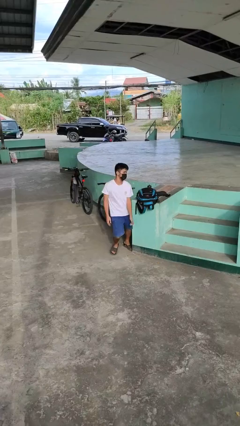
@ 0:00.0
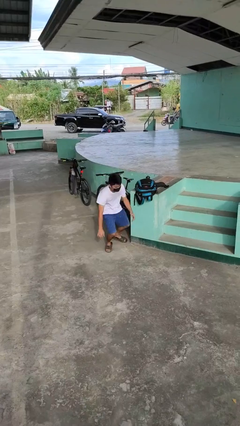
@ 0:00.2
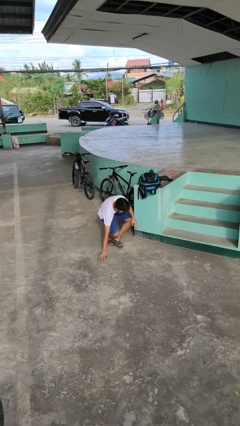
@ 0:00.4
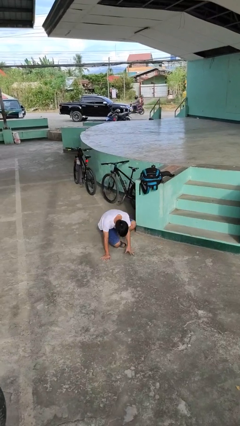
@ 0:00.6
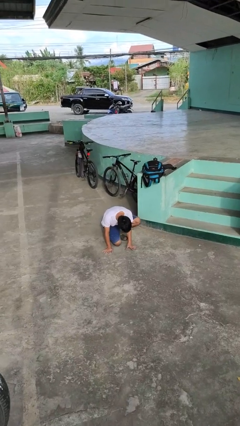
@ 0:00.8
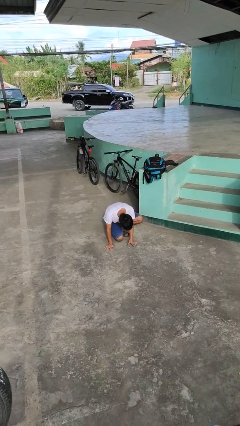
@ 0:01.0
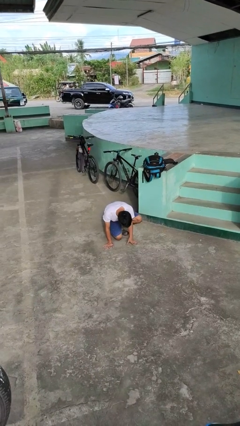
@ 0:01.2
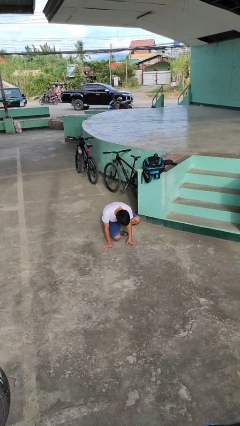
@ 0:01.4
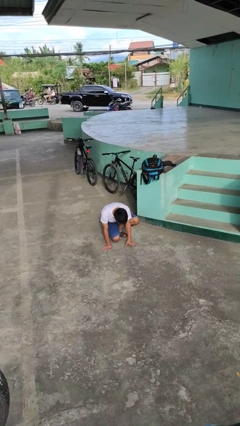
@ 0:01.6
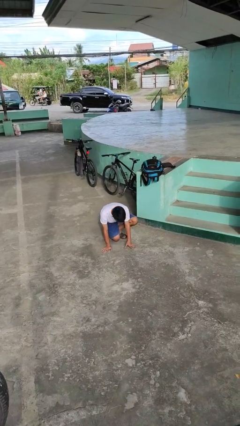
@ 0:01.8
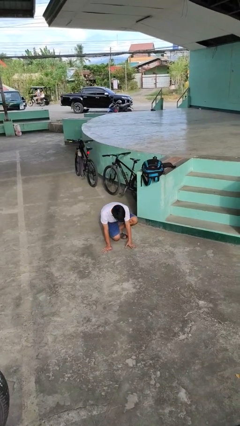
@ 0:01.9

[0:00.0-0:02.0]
person trips on object on floor

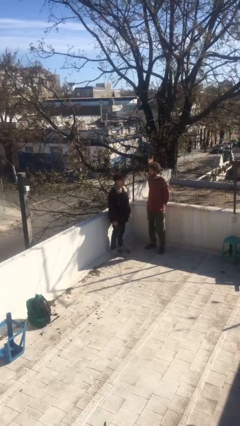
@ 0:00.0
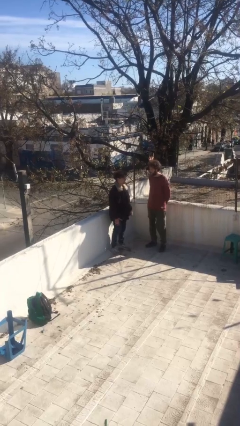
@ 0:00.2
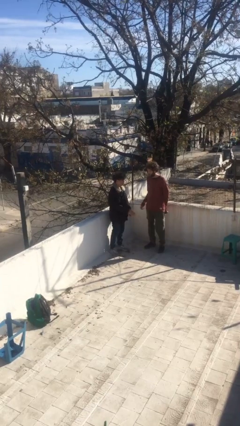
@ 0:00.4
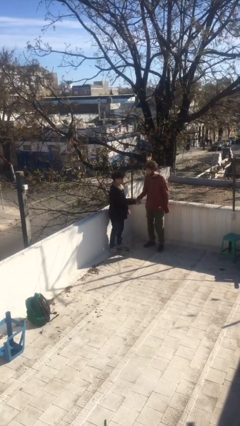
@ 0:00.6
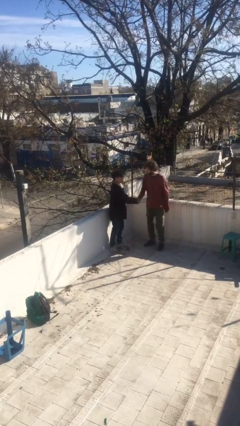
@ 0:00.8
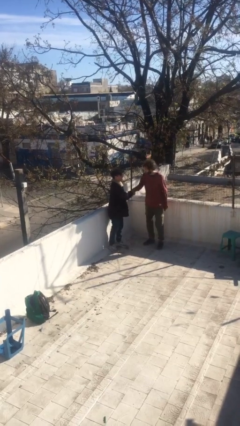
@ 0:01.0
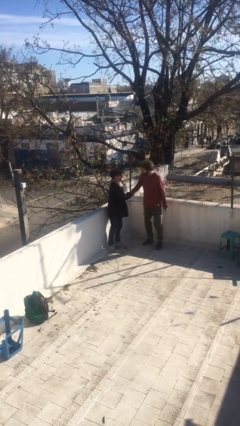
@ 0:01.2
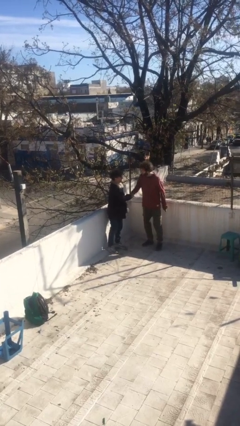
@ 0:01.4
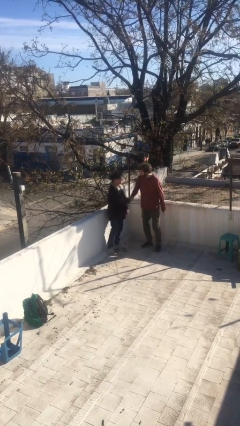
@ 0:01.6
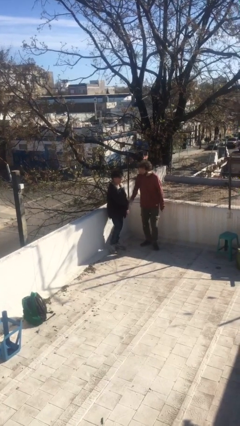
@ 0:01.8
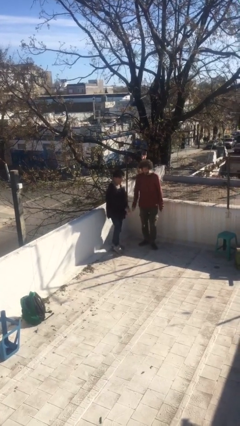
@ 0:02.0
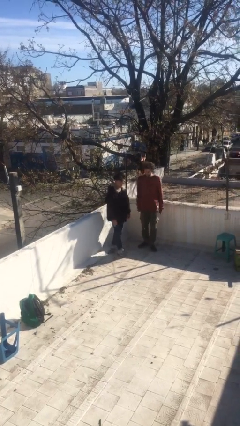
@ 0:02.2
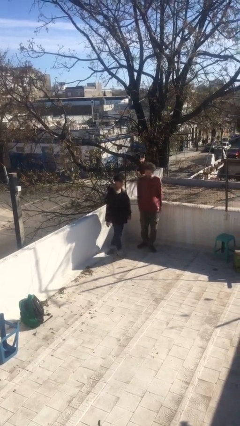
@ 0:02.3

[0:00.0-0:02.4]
person shakes hand

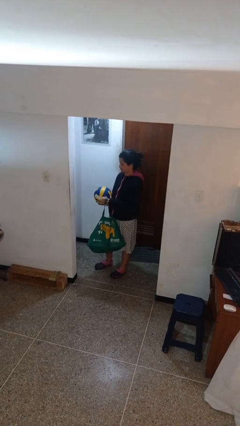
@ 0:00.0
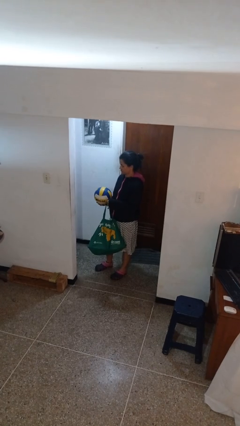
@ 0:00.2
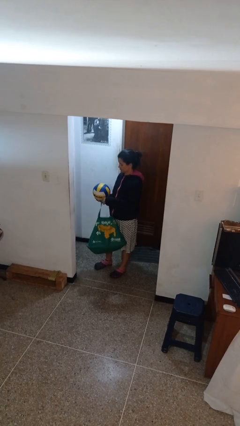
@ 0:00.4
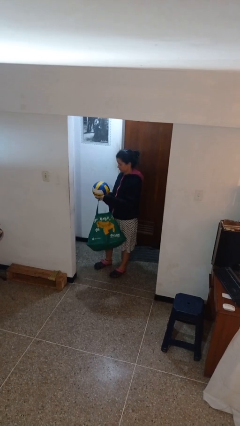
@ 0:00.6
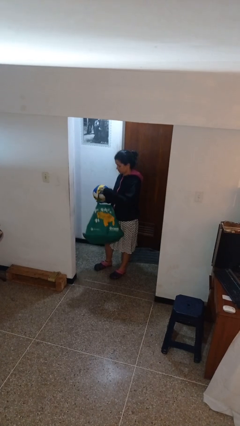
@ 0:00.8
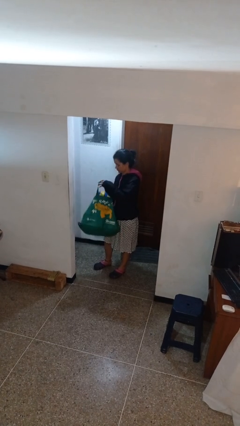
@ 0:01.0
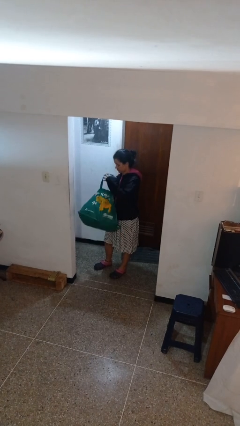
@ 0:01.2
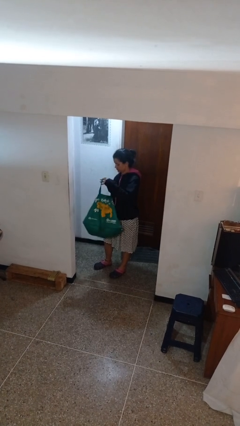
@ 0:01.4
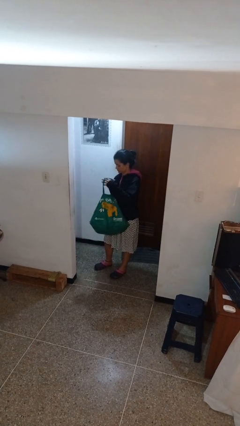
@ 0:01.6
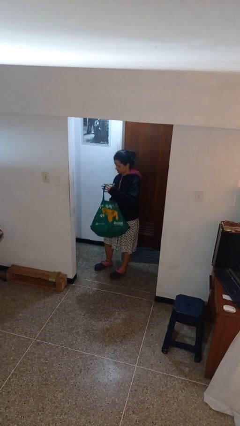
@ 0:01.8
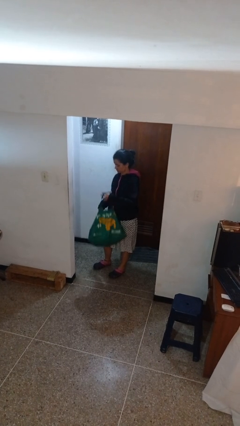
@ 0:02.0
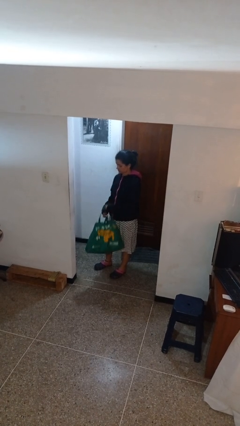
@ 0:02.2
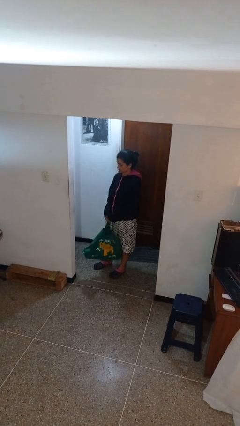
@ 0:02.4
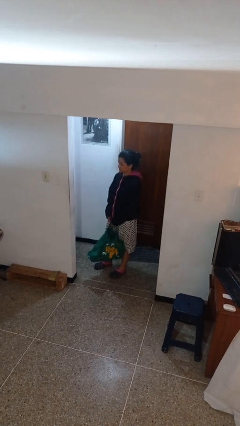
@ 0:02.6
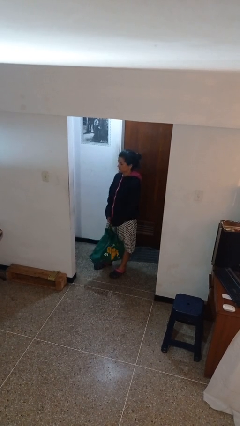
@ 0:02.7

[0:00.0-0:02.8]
person puts object into bag

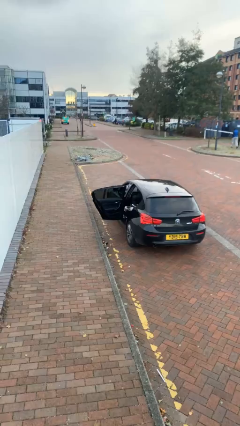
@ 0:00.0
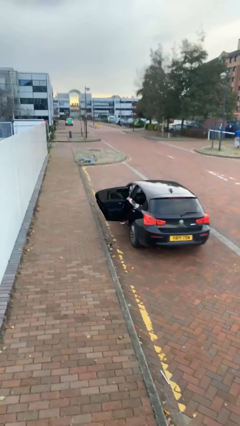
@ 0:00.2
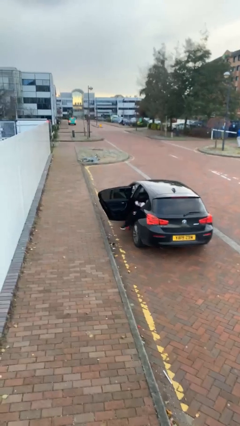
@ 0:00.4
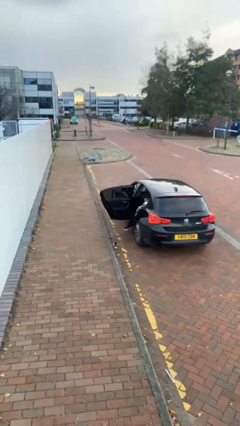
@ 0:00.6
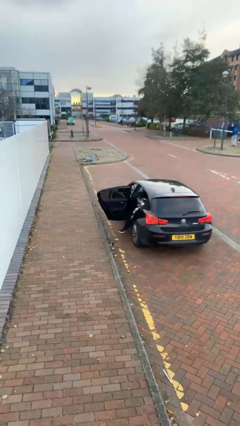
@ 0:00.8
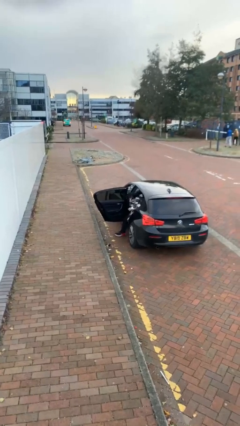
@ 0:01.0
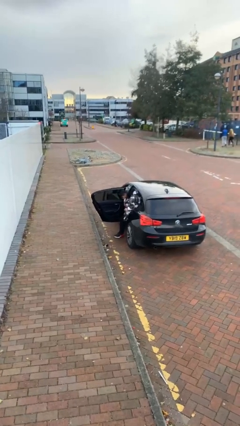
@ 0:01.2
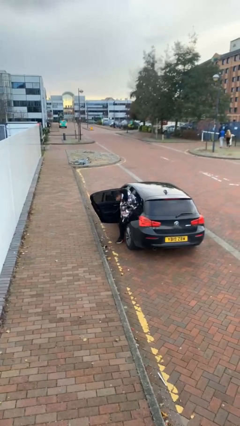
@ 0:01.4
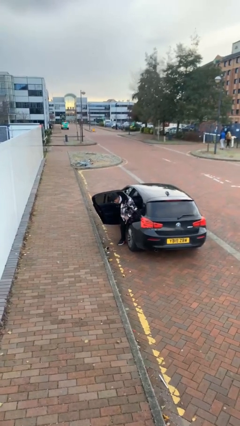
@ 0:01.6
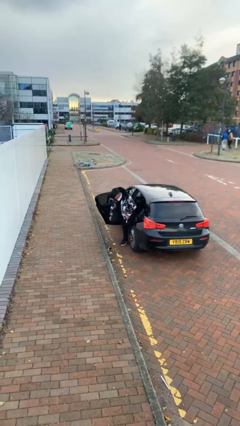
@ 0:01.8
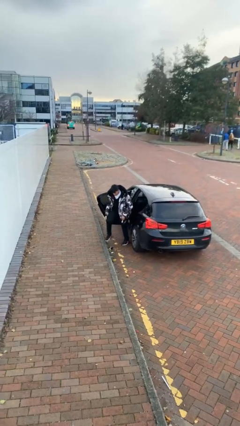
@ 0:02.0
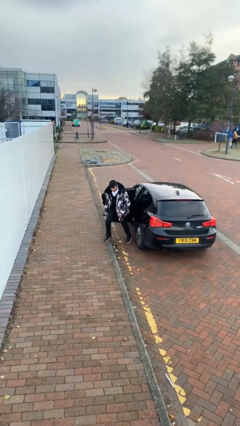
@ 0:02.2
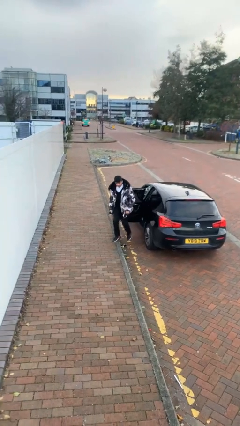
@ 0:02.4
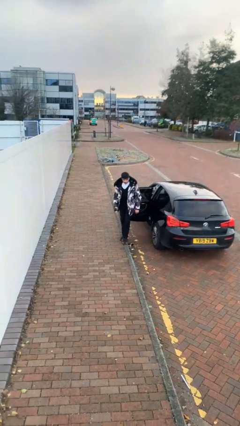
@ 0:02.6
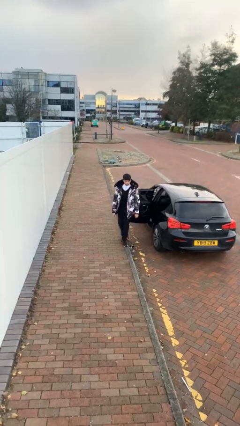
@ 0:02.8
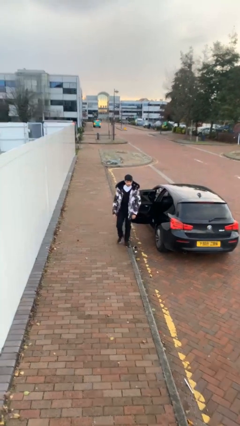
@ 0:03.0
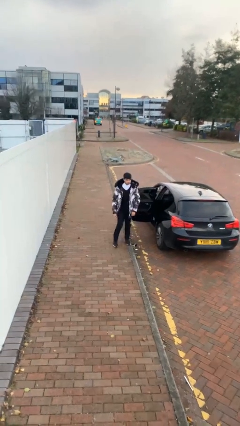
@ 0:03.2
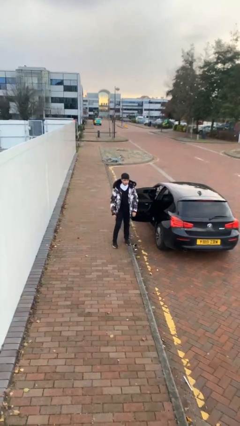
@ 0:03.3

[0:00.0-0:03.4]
person exits car

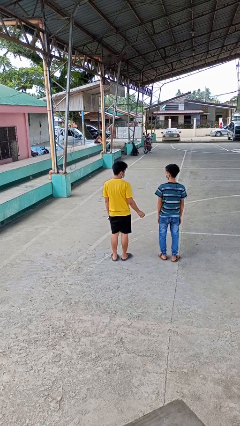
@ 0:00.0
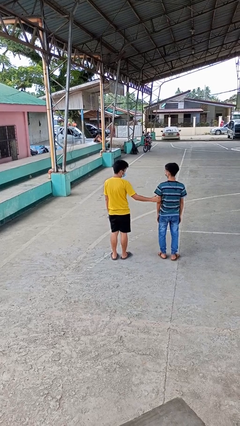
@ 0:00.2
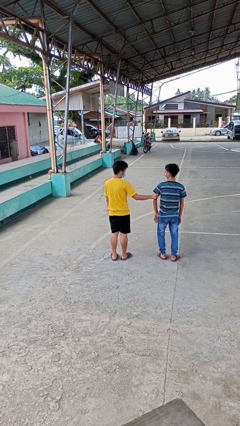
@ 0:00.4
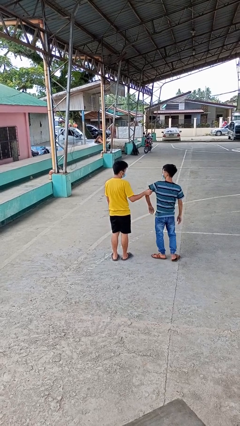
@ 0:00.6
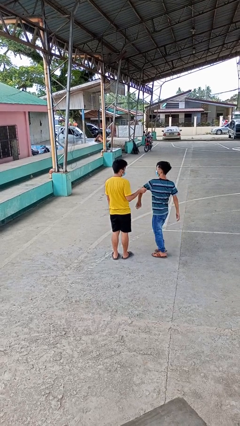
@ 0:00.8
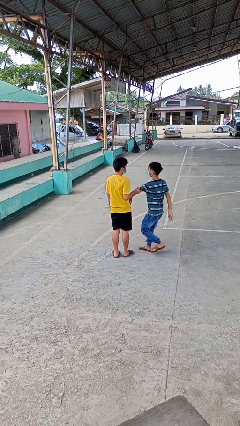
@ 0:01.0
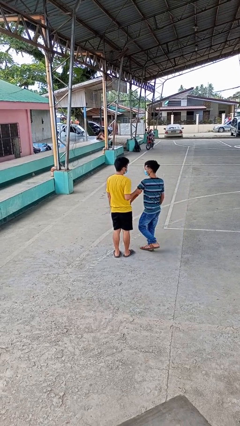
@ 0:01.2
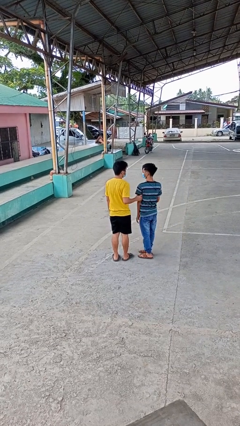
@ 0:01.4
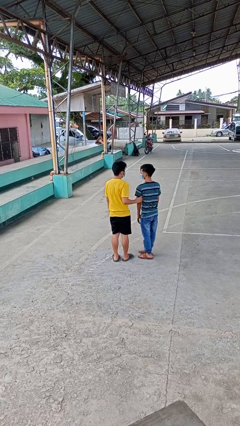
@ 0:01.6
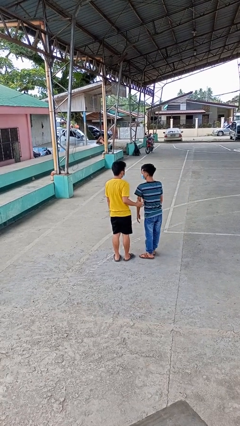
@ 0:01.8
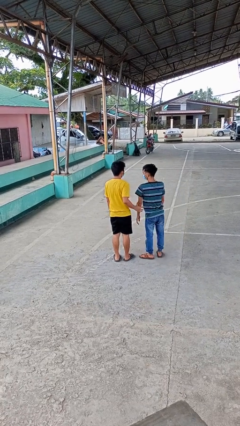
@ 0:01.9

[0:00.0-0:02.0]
person grabs person by bicep

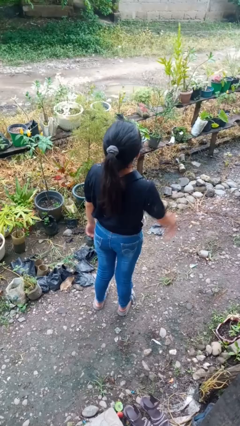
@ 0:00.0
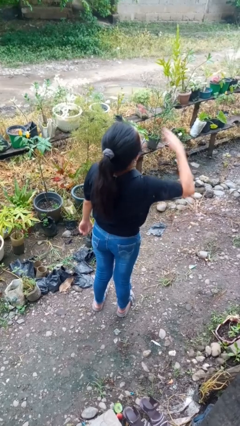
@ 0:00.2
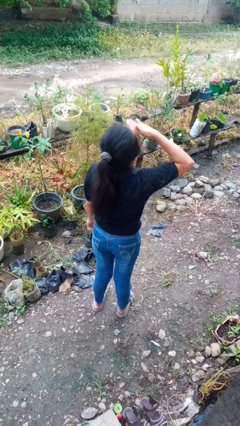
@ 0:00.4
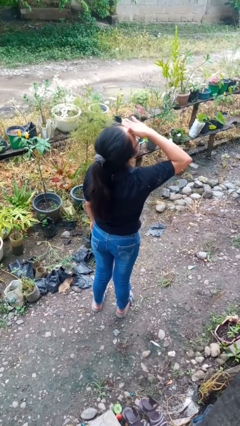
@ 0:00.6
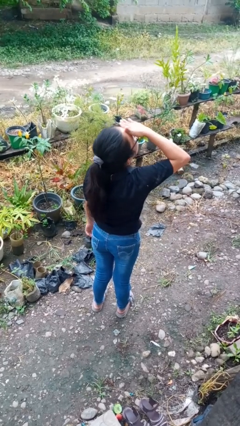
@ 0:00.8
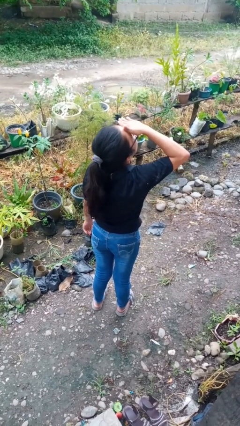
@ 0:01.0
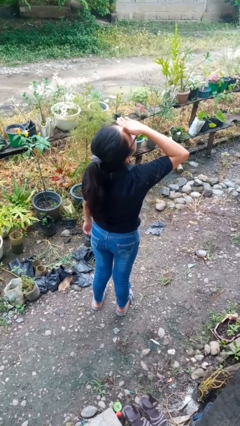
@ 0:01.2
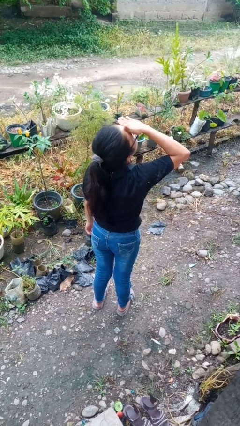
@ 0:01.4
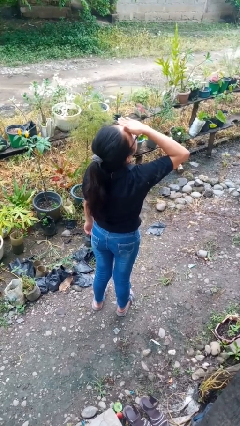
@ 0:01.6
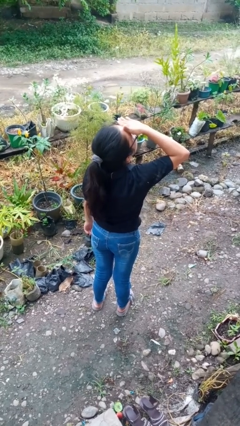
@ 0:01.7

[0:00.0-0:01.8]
person shades eyes

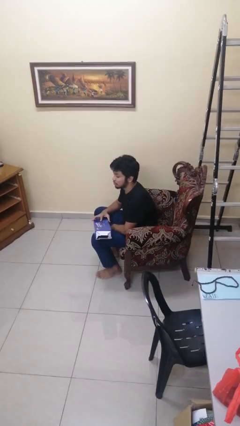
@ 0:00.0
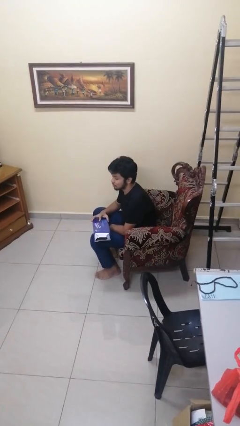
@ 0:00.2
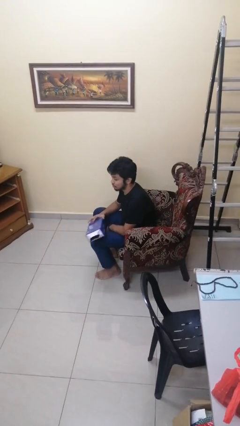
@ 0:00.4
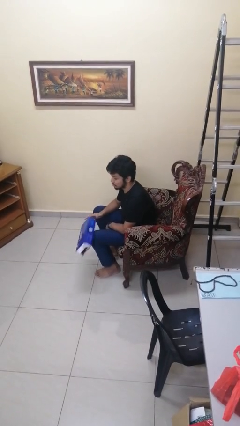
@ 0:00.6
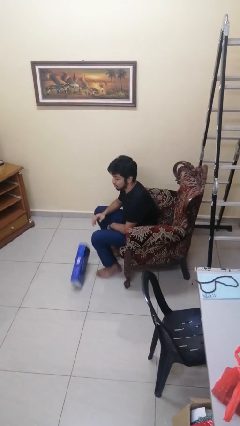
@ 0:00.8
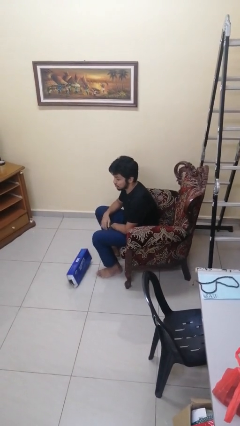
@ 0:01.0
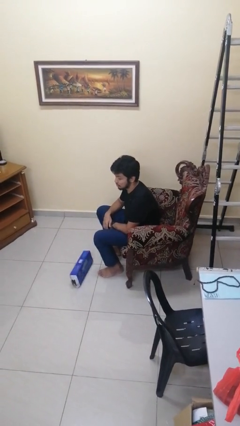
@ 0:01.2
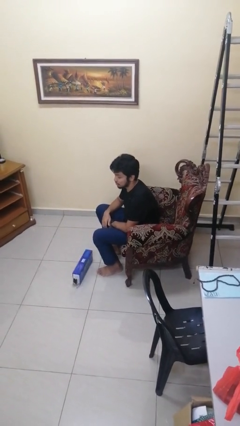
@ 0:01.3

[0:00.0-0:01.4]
person drops object

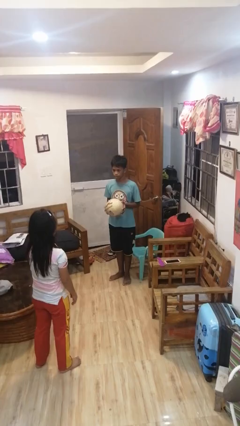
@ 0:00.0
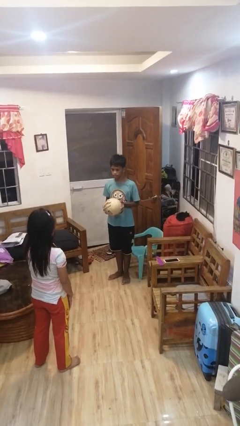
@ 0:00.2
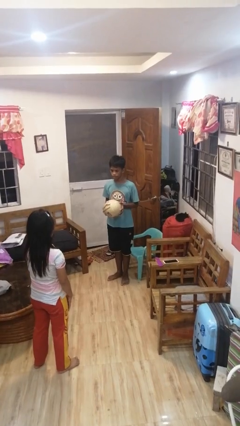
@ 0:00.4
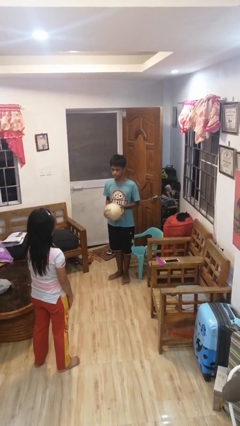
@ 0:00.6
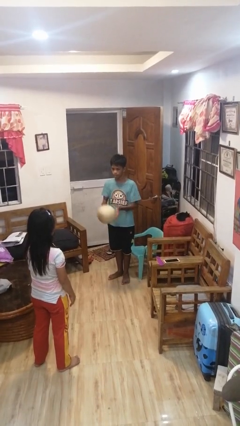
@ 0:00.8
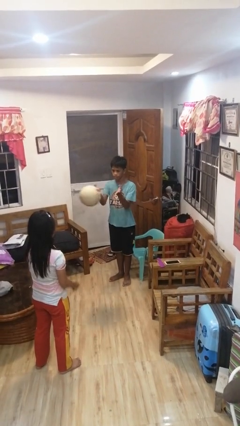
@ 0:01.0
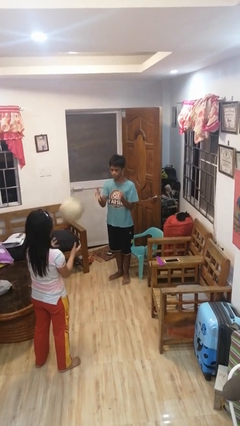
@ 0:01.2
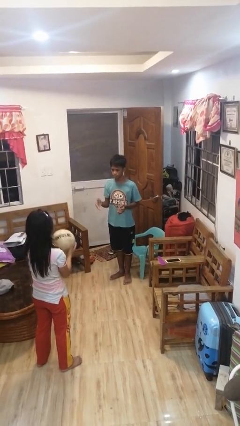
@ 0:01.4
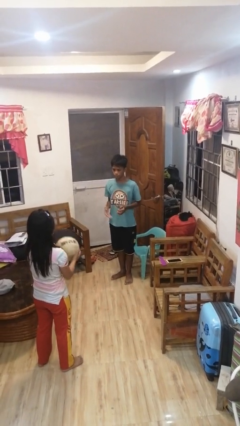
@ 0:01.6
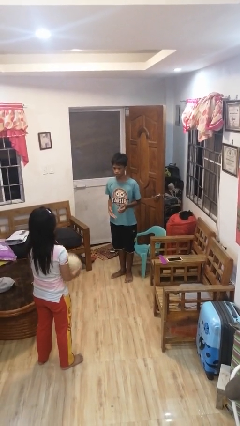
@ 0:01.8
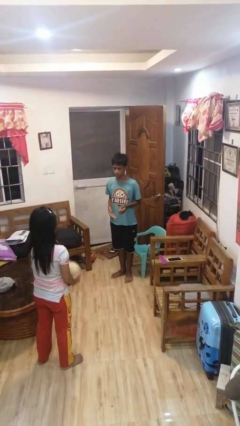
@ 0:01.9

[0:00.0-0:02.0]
person throws object to person
